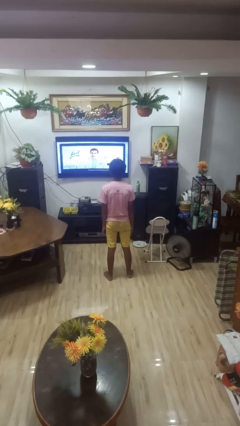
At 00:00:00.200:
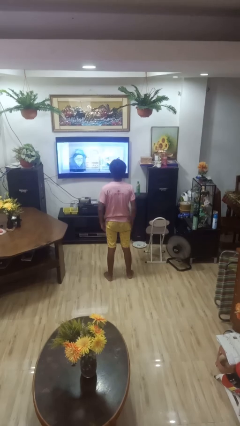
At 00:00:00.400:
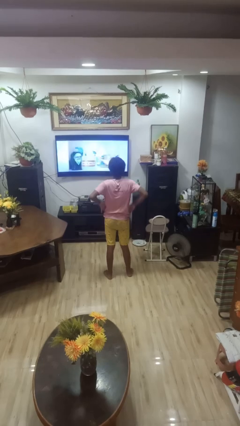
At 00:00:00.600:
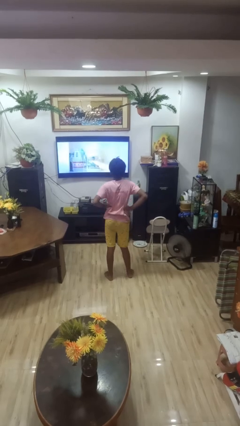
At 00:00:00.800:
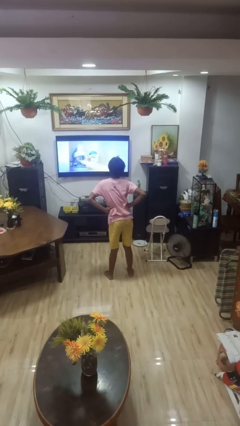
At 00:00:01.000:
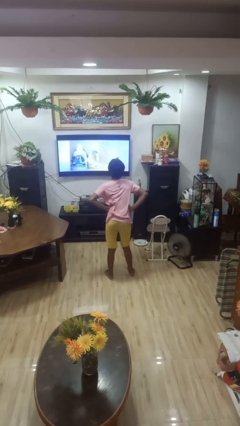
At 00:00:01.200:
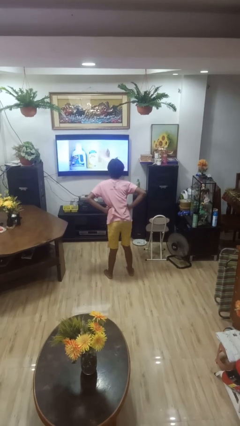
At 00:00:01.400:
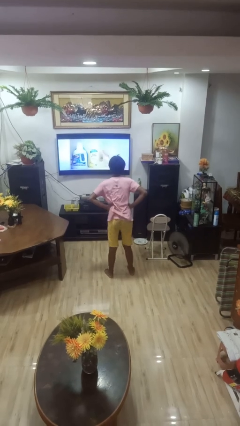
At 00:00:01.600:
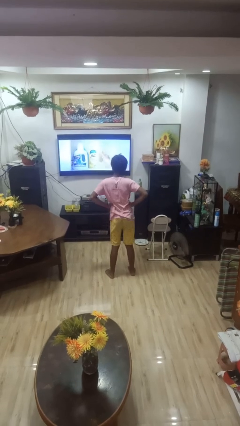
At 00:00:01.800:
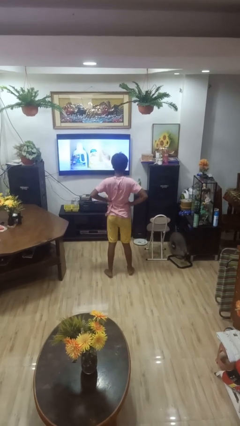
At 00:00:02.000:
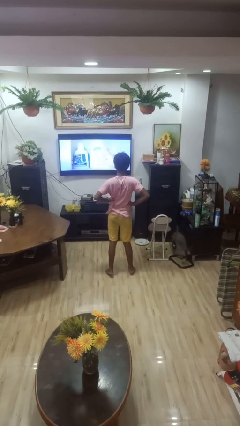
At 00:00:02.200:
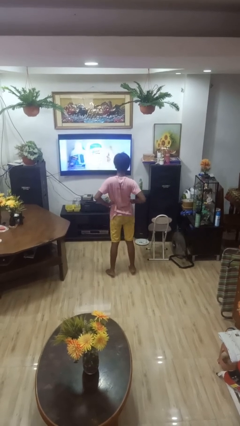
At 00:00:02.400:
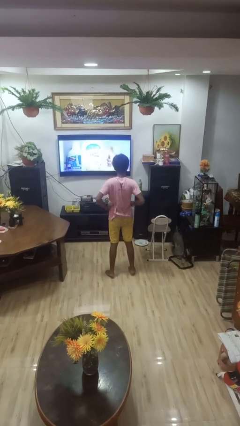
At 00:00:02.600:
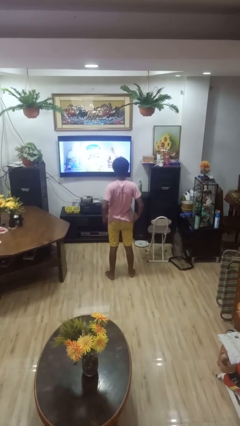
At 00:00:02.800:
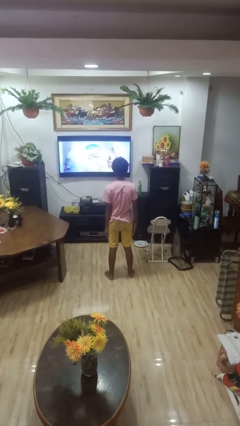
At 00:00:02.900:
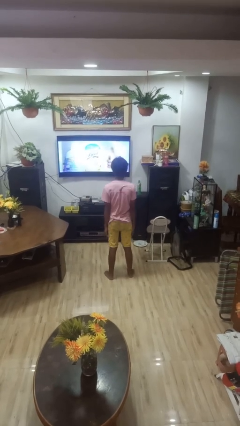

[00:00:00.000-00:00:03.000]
person wiggles hips

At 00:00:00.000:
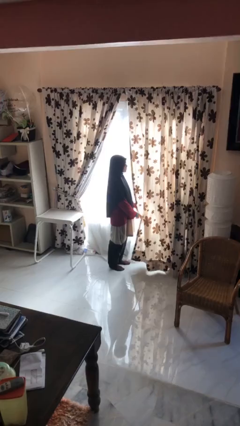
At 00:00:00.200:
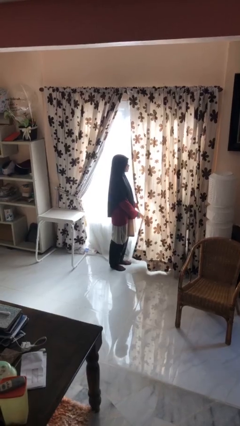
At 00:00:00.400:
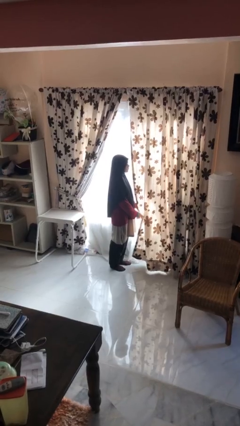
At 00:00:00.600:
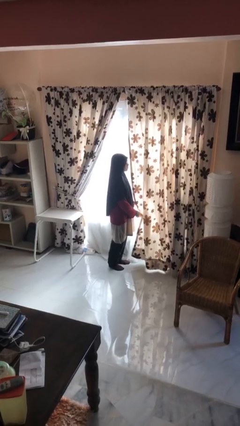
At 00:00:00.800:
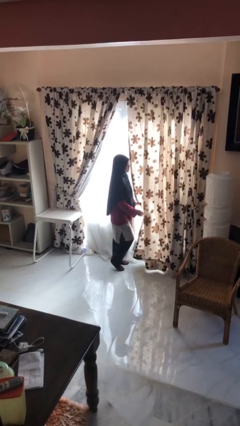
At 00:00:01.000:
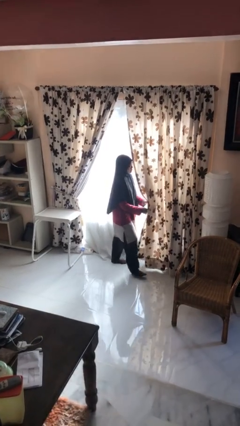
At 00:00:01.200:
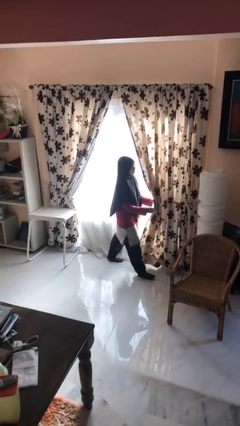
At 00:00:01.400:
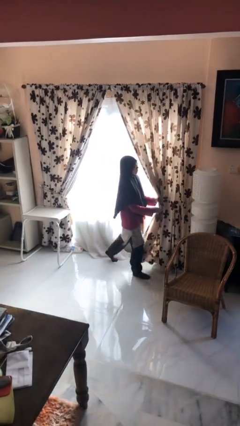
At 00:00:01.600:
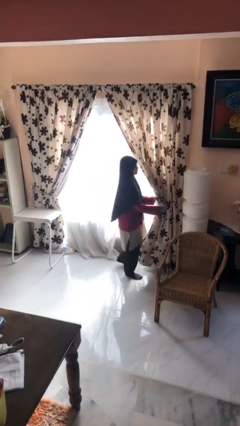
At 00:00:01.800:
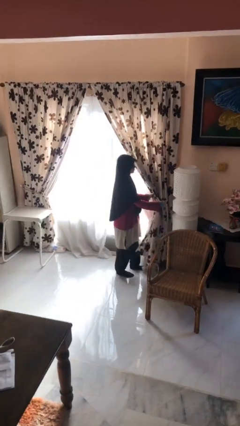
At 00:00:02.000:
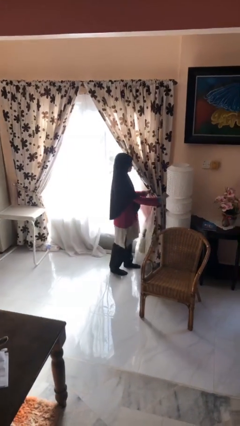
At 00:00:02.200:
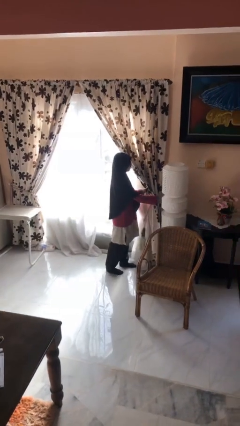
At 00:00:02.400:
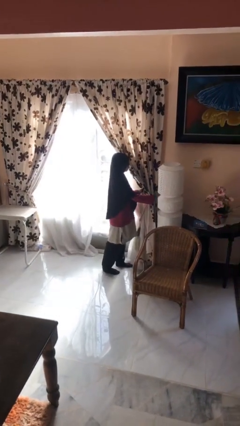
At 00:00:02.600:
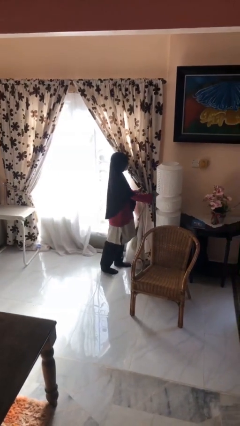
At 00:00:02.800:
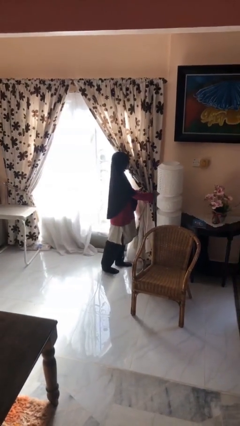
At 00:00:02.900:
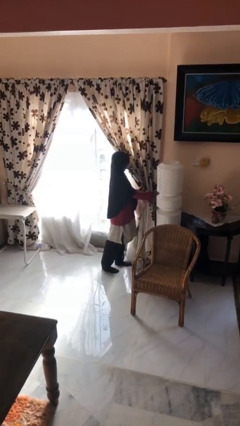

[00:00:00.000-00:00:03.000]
person opens curtains

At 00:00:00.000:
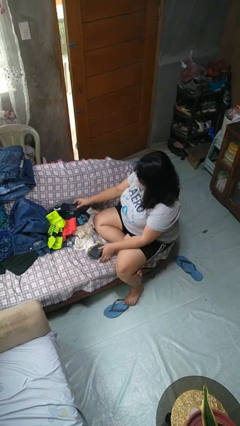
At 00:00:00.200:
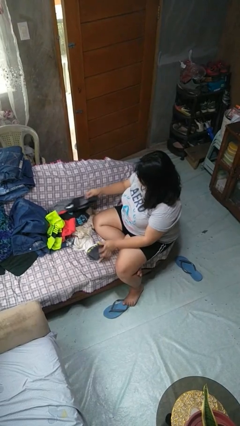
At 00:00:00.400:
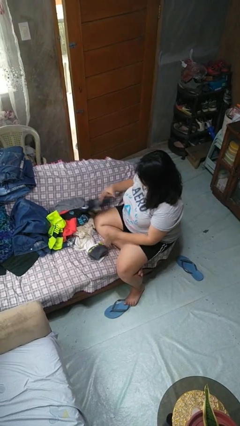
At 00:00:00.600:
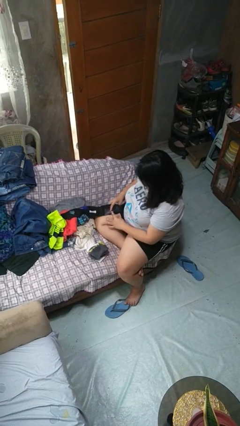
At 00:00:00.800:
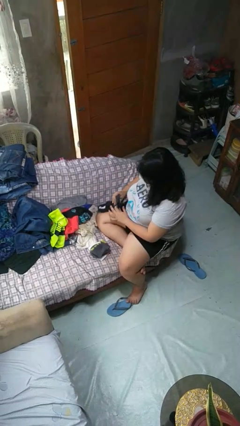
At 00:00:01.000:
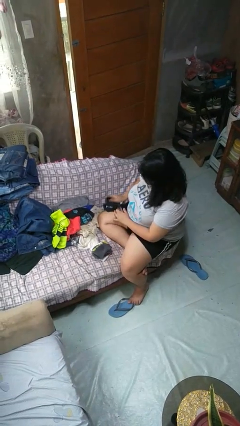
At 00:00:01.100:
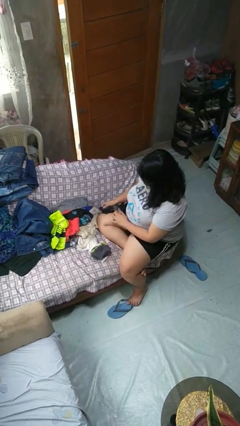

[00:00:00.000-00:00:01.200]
person folds socks

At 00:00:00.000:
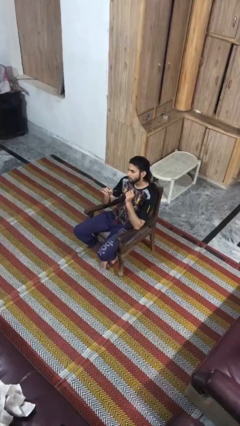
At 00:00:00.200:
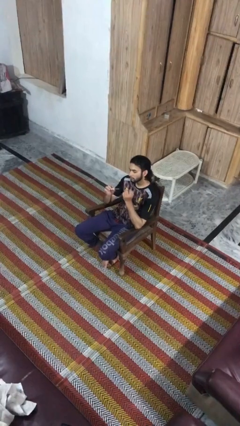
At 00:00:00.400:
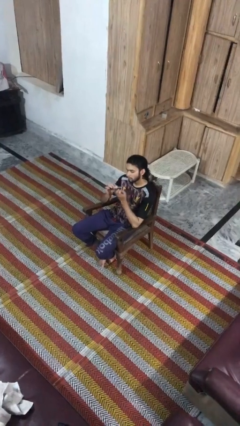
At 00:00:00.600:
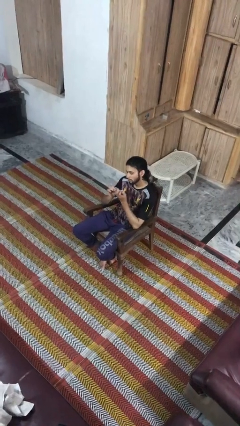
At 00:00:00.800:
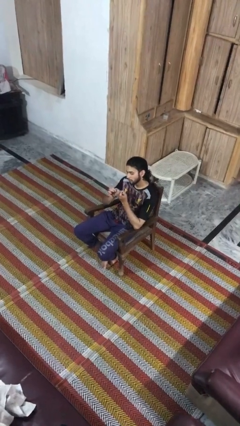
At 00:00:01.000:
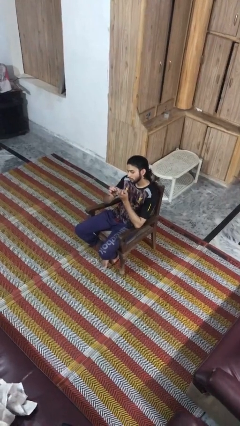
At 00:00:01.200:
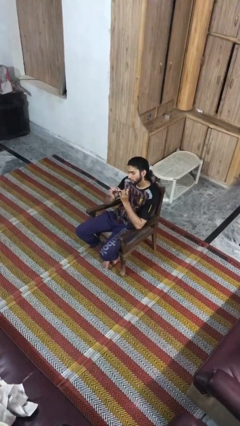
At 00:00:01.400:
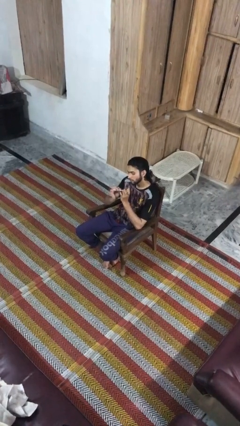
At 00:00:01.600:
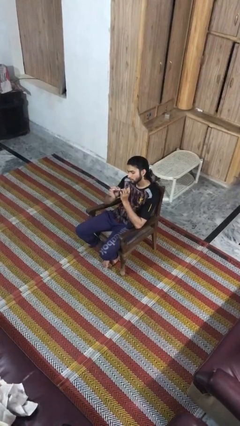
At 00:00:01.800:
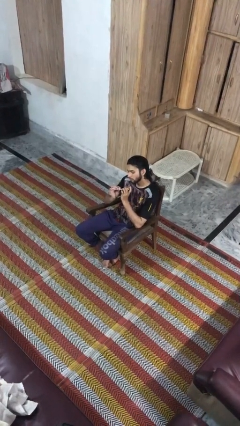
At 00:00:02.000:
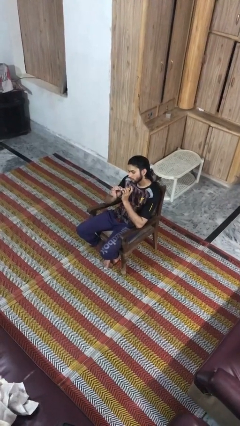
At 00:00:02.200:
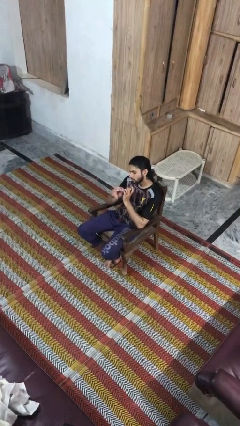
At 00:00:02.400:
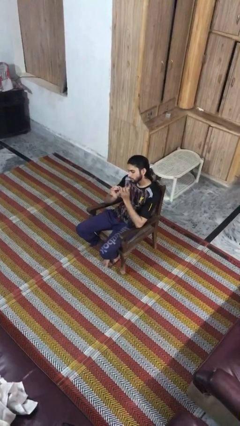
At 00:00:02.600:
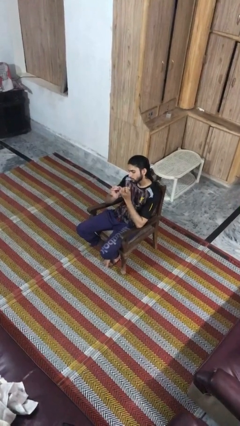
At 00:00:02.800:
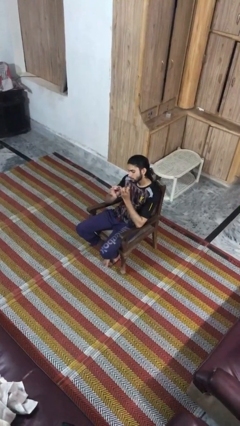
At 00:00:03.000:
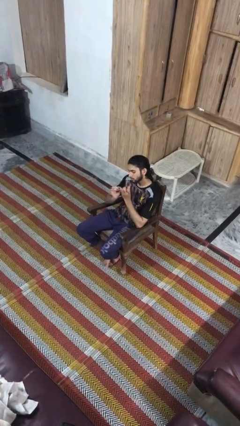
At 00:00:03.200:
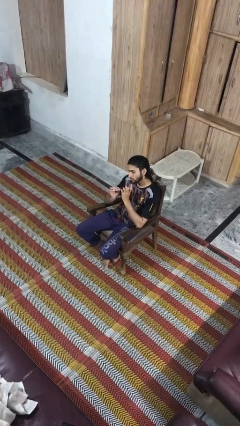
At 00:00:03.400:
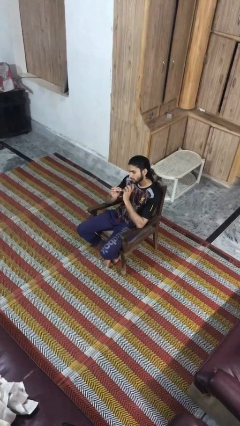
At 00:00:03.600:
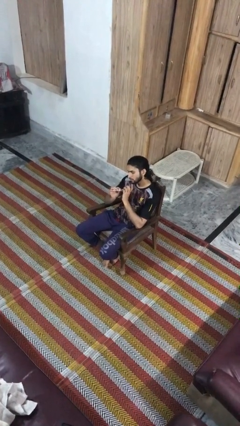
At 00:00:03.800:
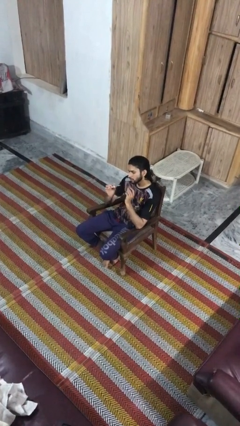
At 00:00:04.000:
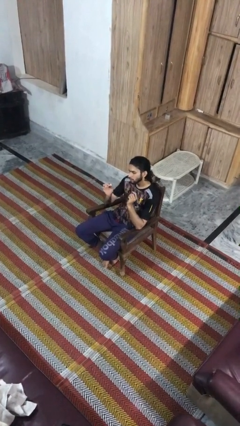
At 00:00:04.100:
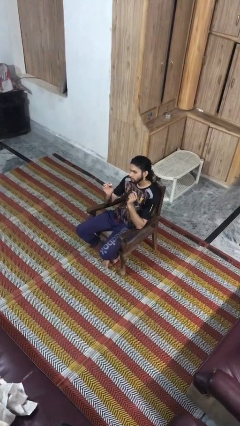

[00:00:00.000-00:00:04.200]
person files fingernails

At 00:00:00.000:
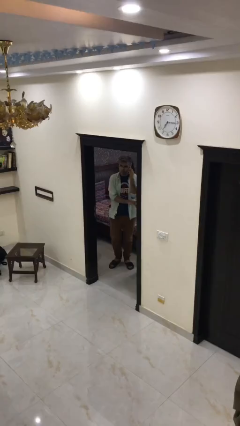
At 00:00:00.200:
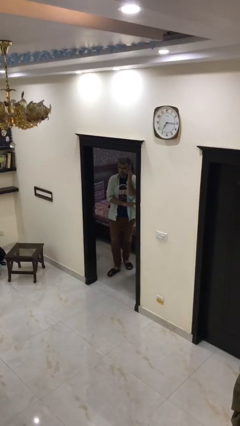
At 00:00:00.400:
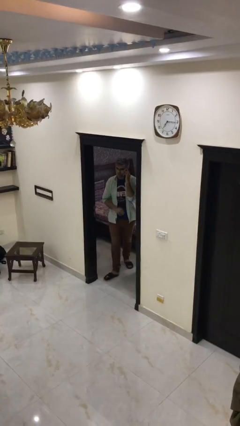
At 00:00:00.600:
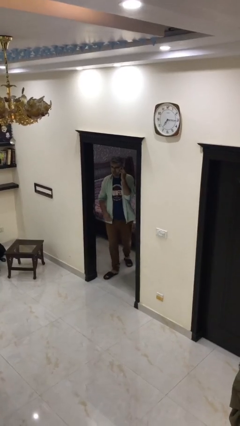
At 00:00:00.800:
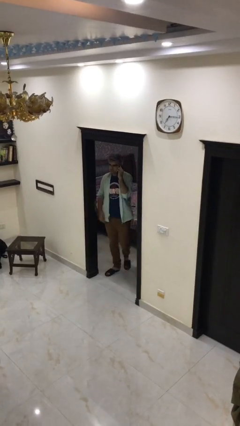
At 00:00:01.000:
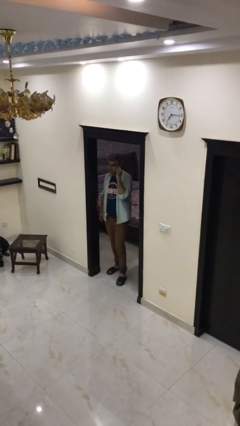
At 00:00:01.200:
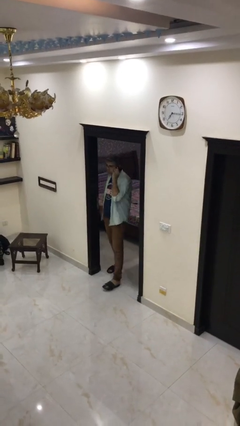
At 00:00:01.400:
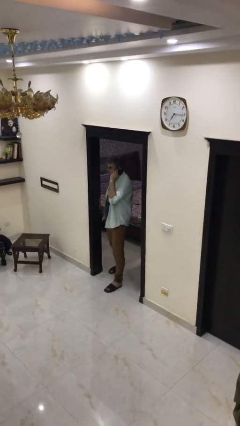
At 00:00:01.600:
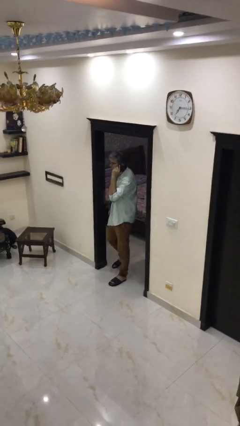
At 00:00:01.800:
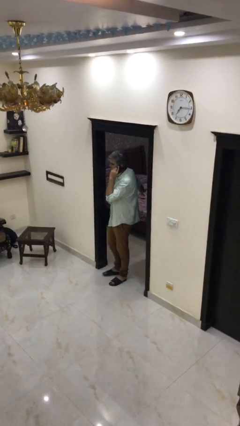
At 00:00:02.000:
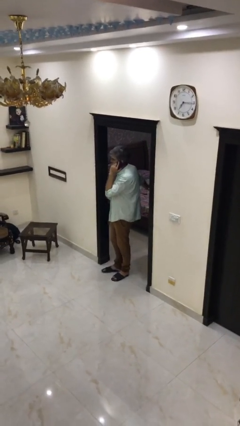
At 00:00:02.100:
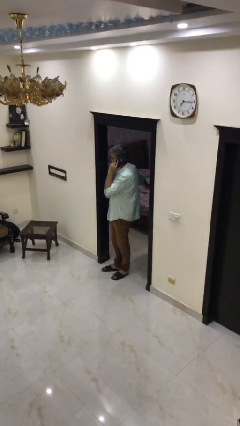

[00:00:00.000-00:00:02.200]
person enters scene through structure

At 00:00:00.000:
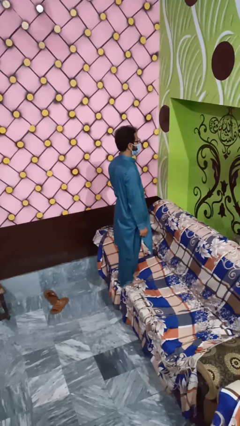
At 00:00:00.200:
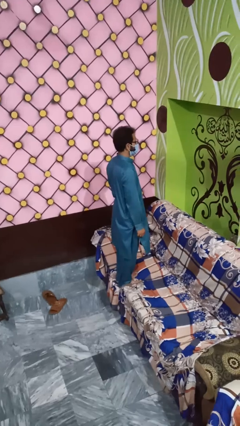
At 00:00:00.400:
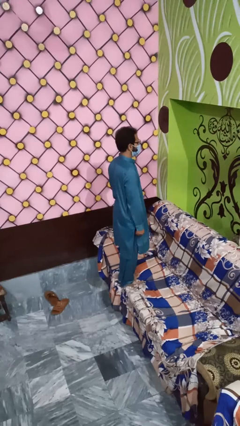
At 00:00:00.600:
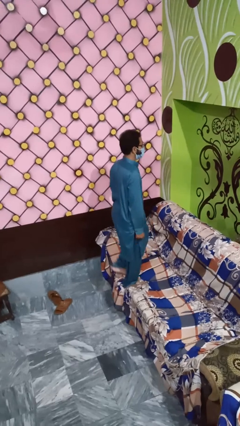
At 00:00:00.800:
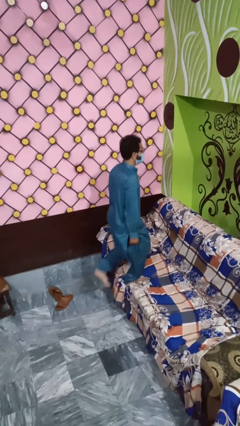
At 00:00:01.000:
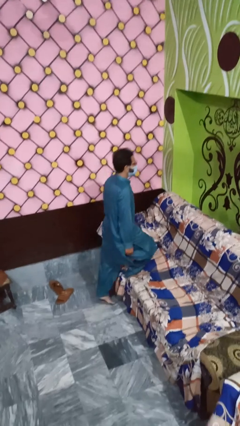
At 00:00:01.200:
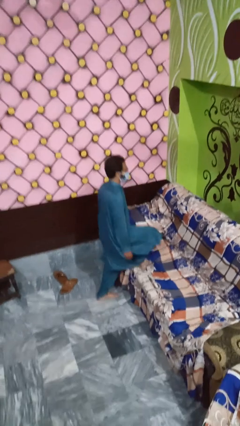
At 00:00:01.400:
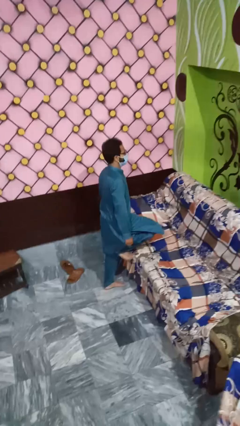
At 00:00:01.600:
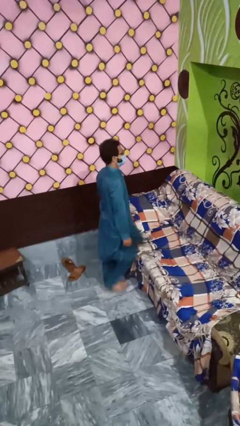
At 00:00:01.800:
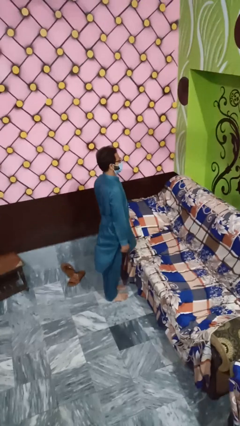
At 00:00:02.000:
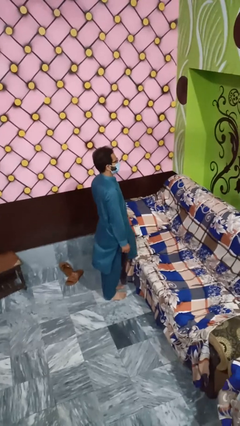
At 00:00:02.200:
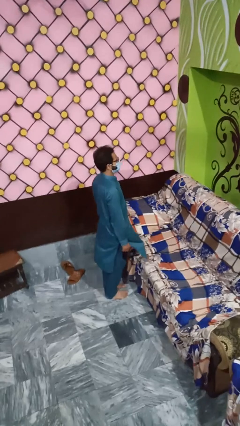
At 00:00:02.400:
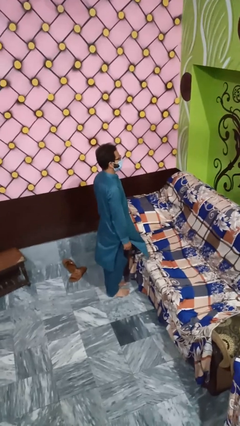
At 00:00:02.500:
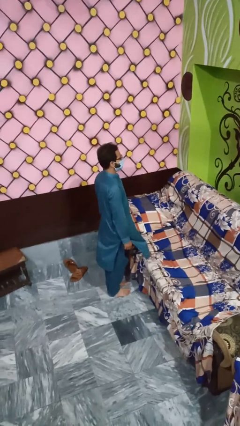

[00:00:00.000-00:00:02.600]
person climbs off couch

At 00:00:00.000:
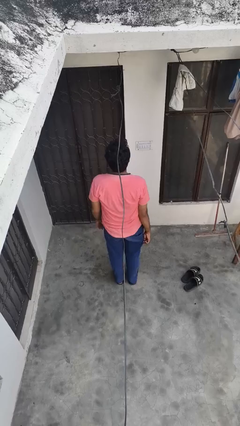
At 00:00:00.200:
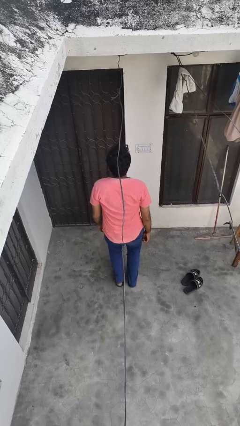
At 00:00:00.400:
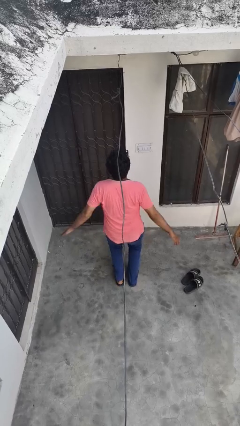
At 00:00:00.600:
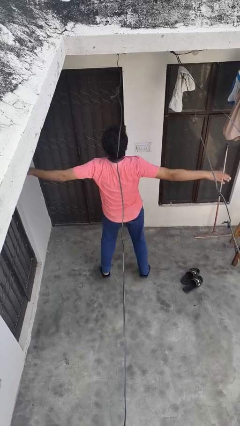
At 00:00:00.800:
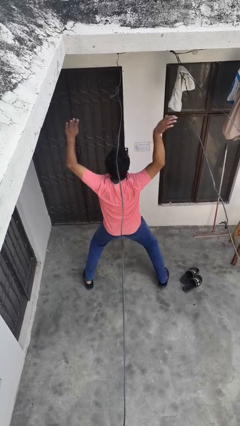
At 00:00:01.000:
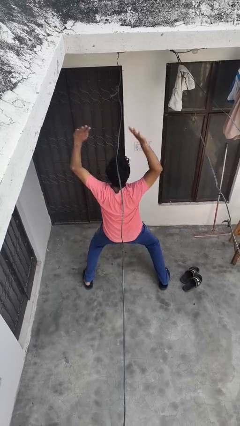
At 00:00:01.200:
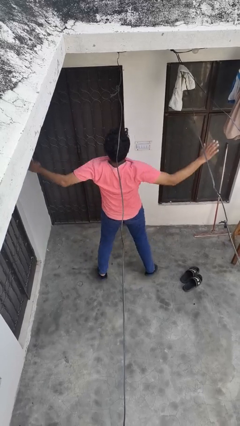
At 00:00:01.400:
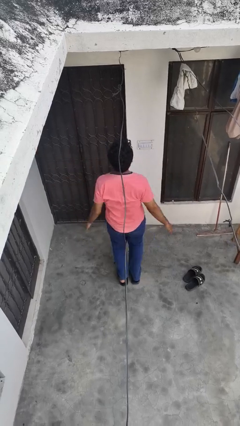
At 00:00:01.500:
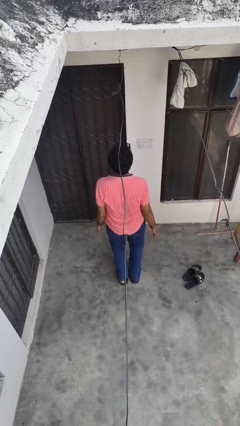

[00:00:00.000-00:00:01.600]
person exercises with jumping jacks
